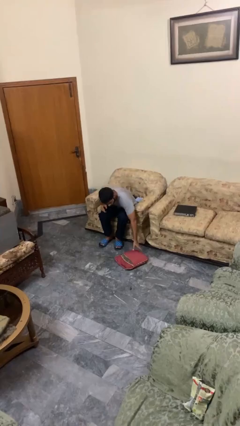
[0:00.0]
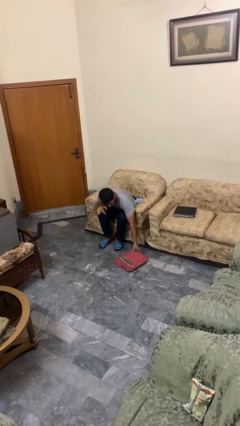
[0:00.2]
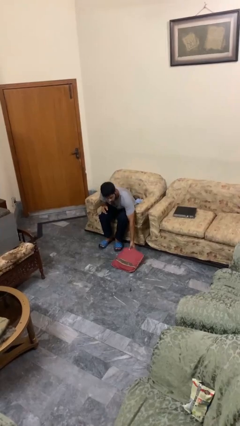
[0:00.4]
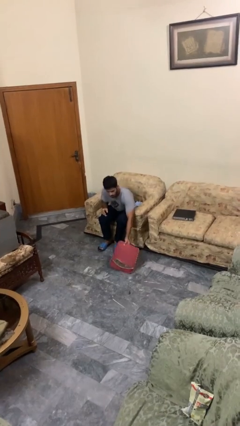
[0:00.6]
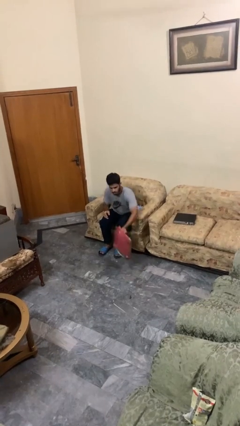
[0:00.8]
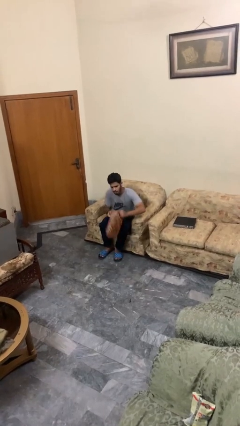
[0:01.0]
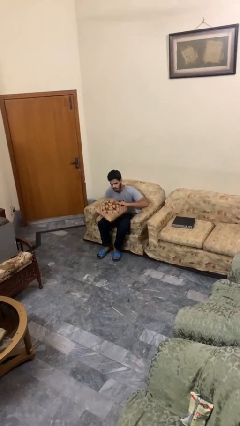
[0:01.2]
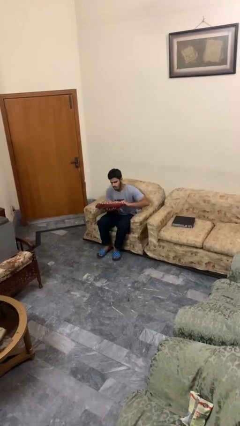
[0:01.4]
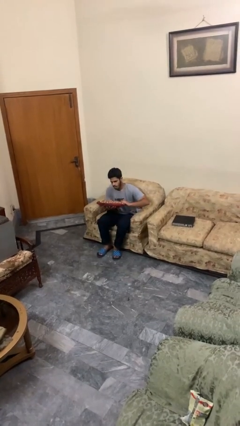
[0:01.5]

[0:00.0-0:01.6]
person picks up object from floor

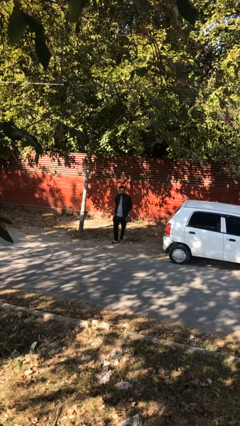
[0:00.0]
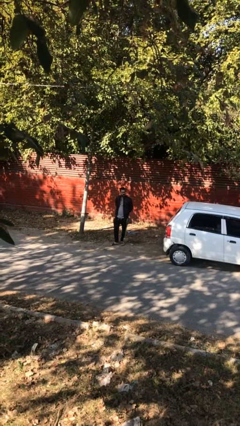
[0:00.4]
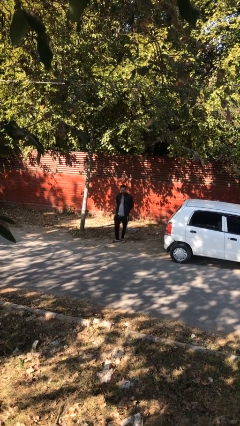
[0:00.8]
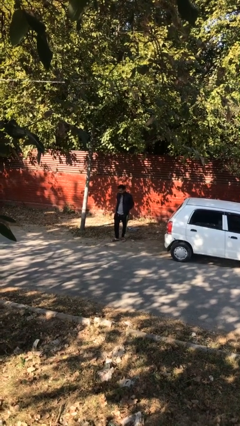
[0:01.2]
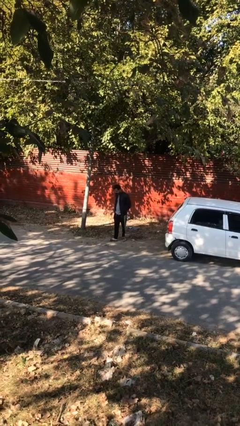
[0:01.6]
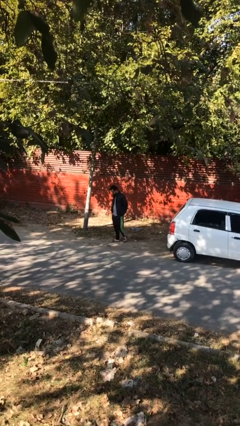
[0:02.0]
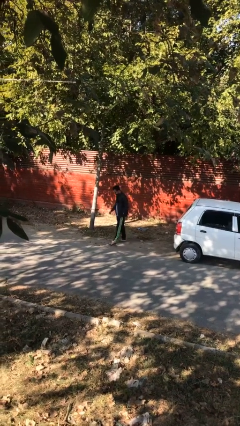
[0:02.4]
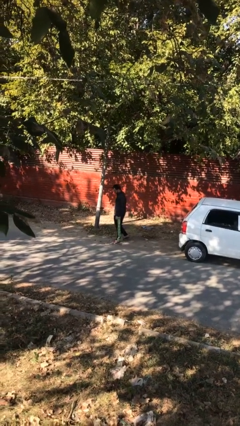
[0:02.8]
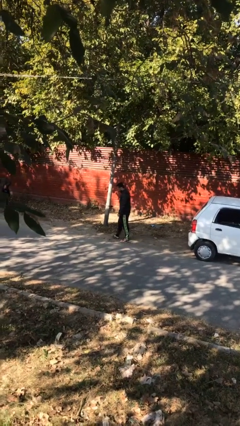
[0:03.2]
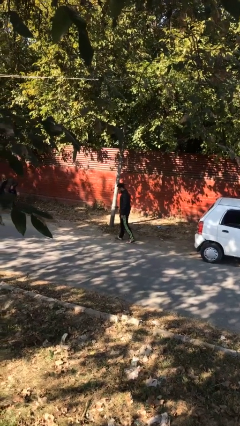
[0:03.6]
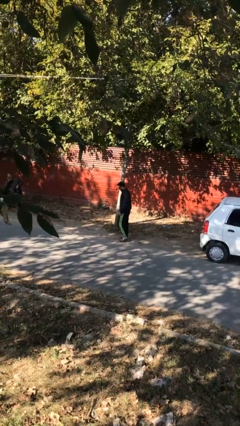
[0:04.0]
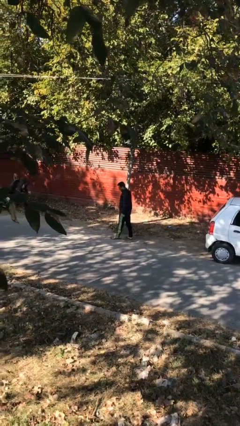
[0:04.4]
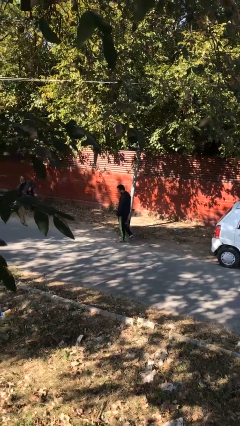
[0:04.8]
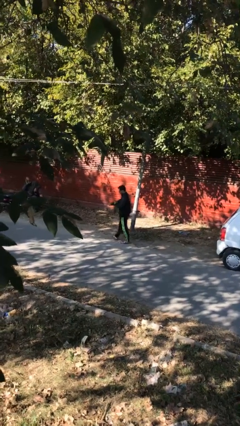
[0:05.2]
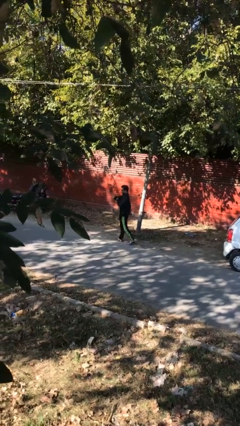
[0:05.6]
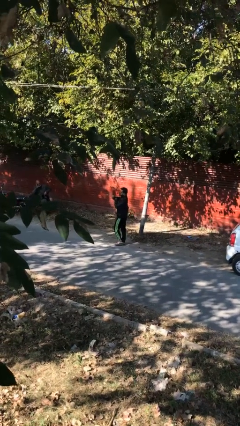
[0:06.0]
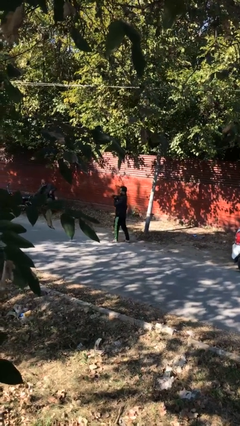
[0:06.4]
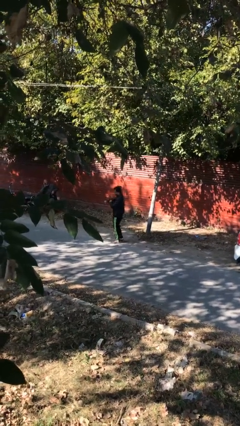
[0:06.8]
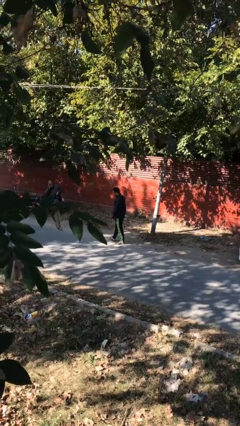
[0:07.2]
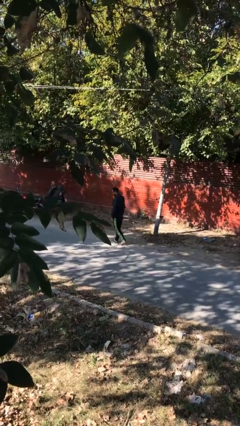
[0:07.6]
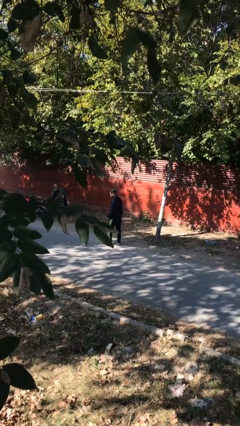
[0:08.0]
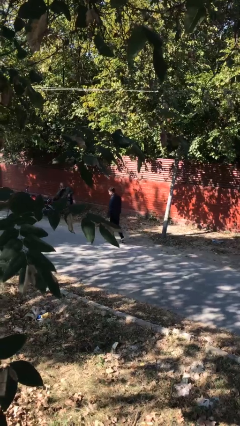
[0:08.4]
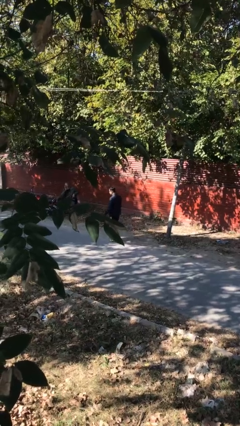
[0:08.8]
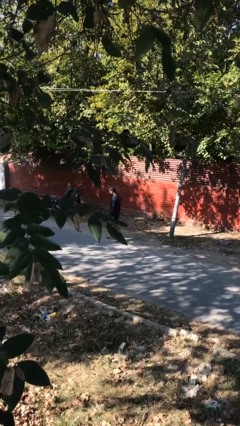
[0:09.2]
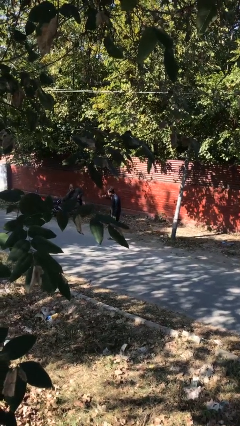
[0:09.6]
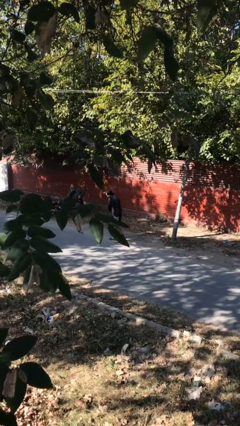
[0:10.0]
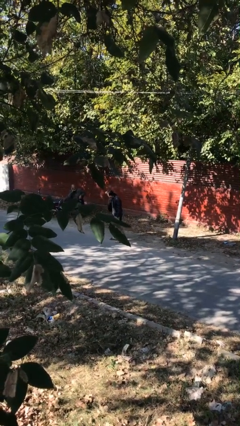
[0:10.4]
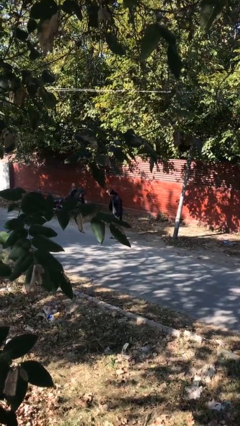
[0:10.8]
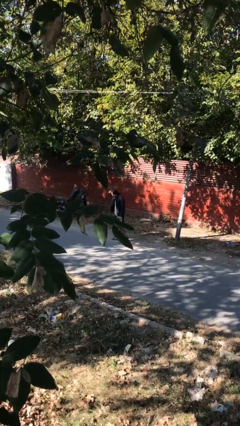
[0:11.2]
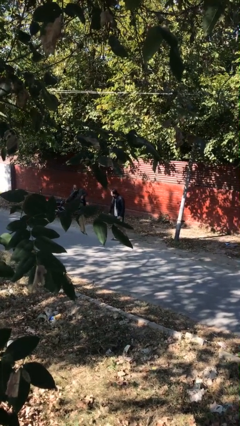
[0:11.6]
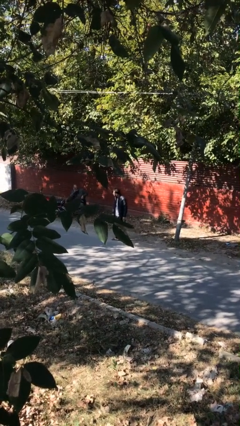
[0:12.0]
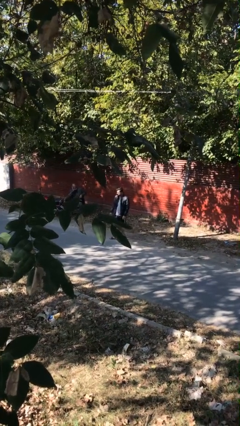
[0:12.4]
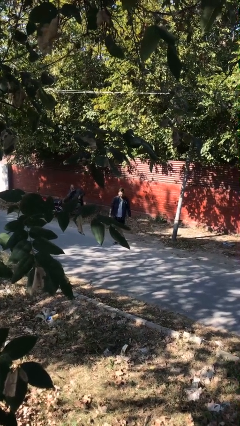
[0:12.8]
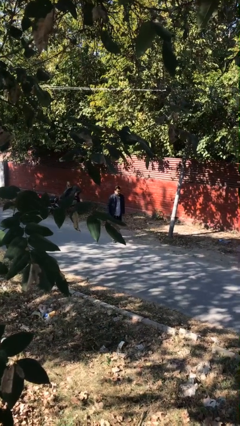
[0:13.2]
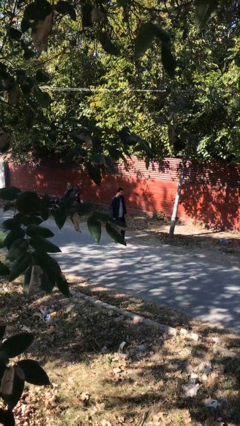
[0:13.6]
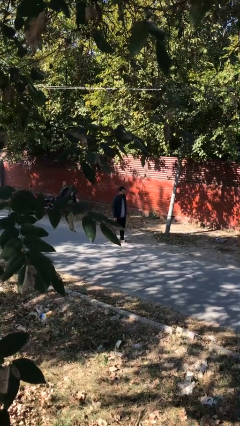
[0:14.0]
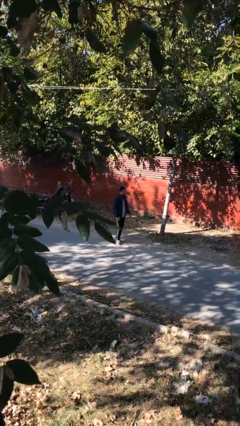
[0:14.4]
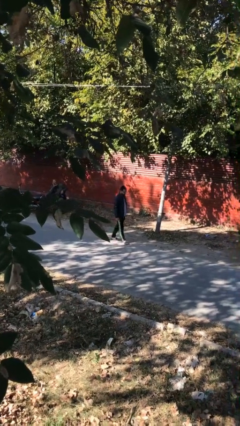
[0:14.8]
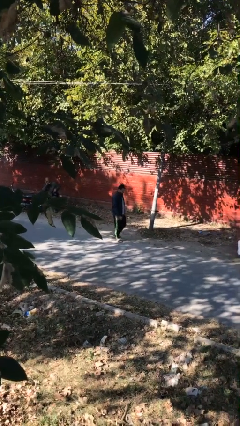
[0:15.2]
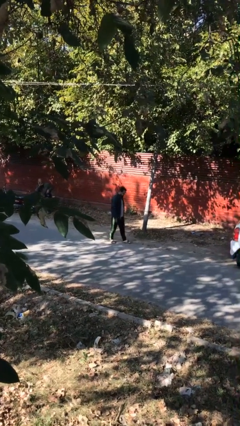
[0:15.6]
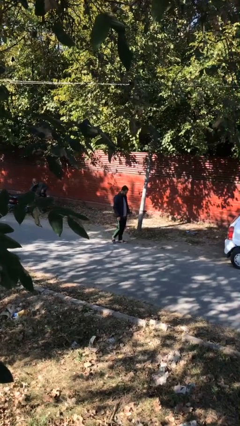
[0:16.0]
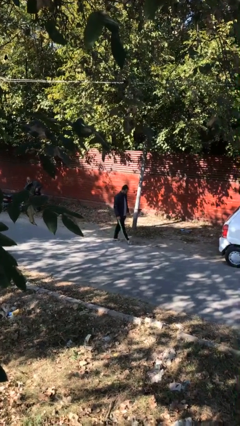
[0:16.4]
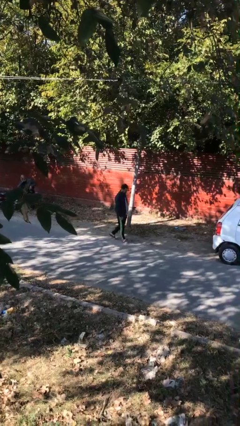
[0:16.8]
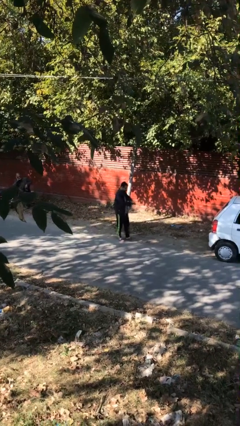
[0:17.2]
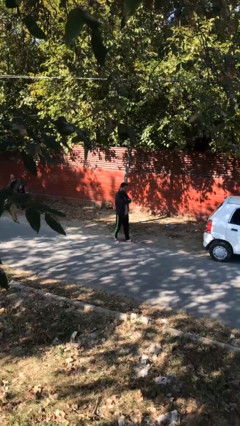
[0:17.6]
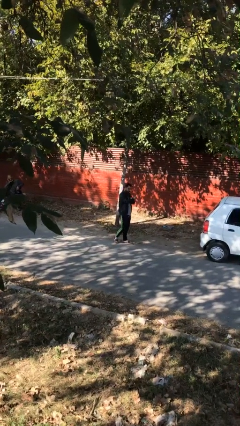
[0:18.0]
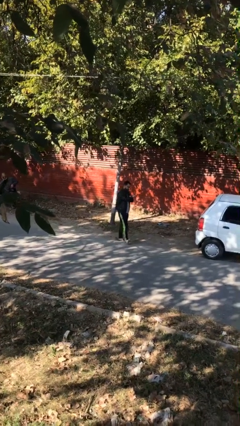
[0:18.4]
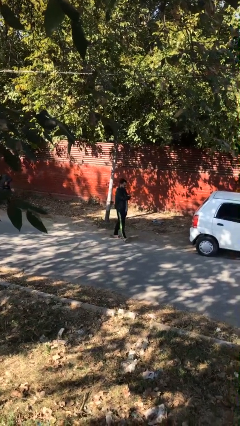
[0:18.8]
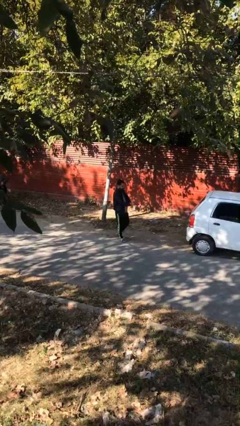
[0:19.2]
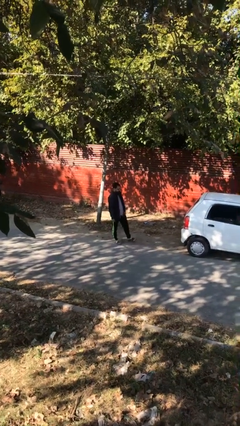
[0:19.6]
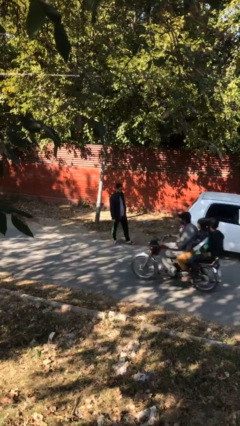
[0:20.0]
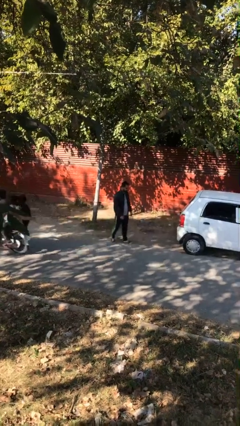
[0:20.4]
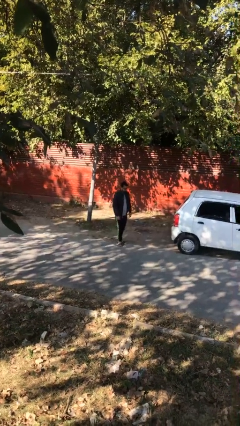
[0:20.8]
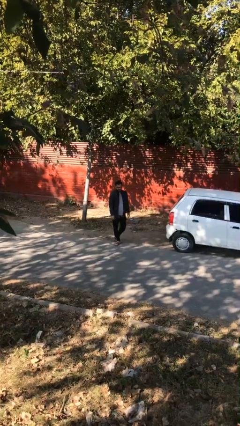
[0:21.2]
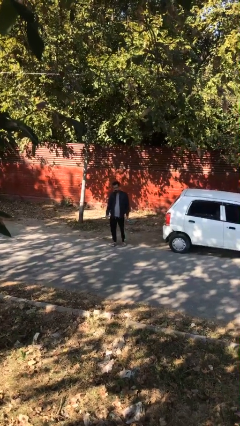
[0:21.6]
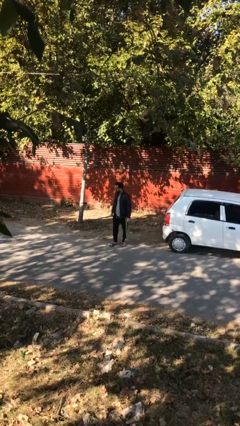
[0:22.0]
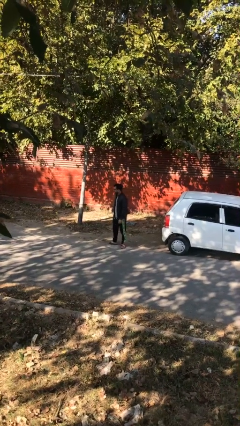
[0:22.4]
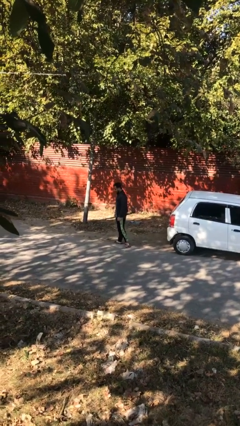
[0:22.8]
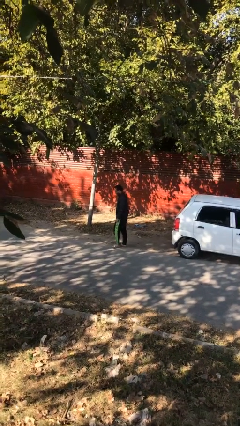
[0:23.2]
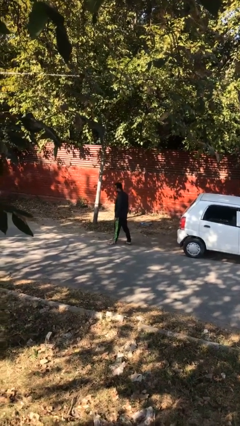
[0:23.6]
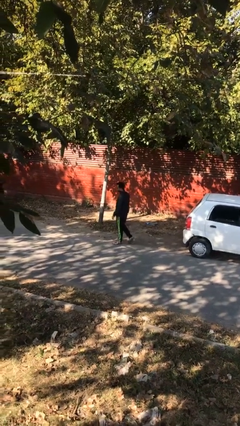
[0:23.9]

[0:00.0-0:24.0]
person walks

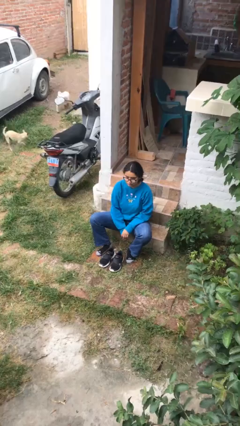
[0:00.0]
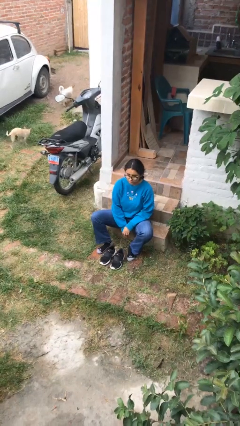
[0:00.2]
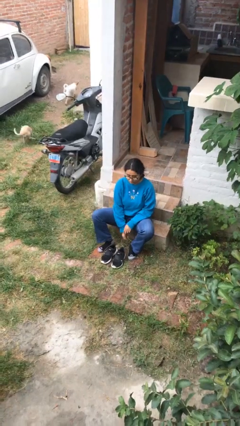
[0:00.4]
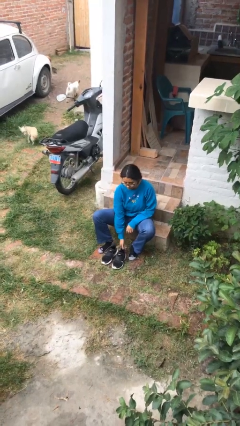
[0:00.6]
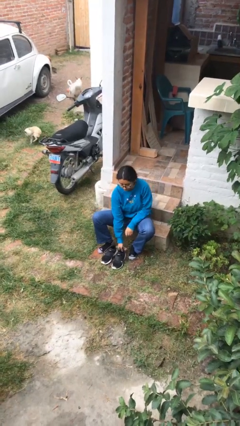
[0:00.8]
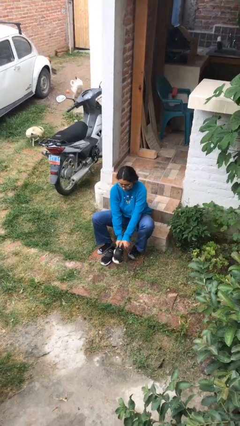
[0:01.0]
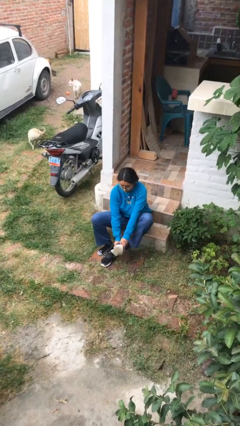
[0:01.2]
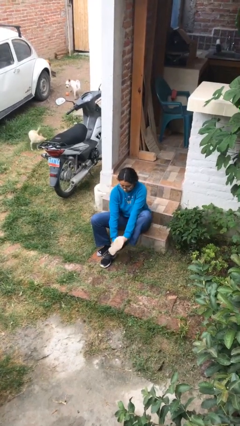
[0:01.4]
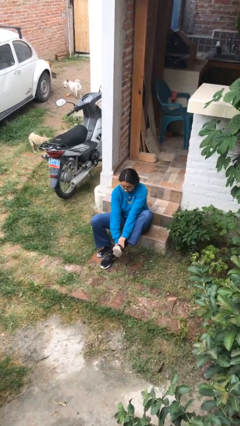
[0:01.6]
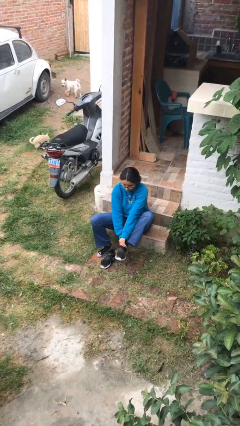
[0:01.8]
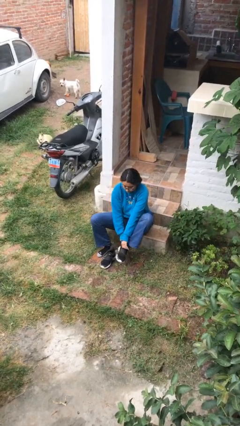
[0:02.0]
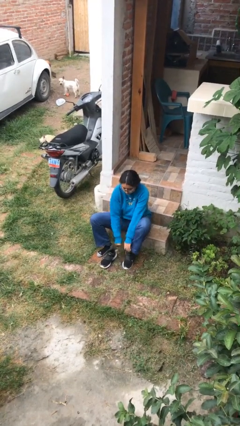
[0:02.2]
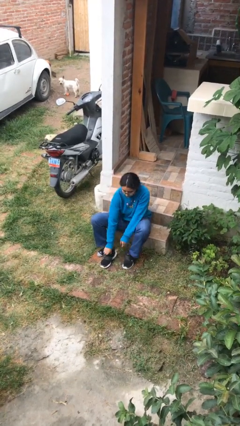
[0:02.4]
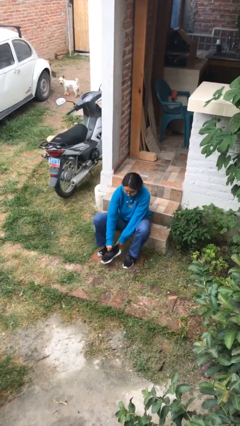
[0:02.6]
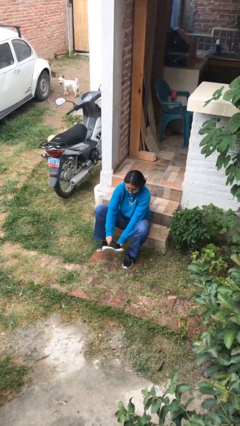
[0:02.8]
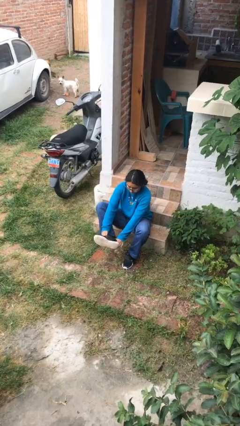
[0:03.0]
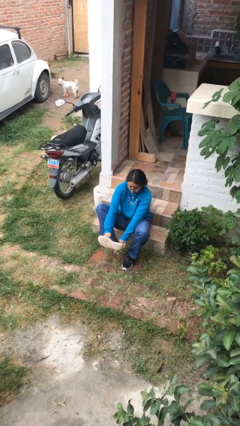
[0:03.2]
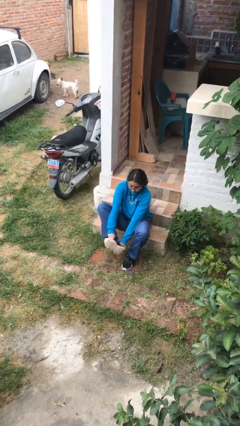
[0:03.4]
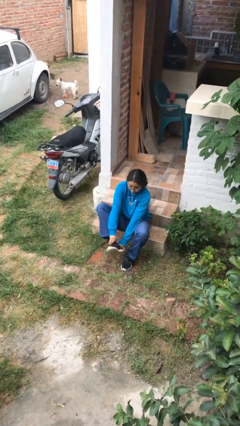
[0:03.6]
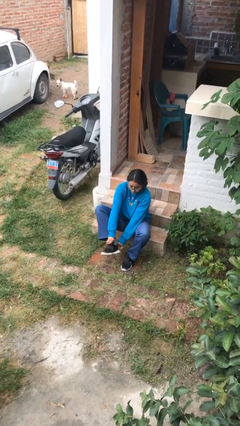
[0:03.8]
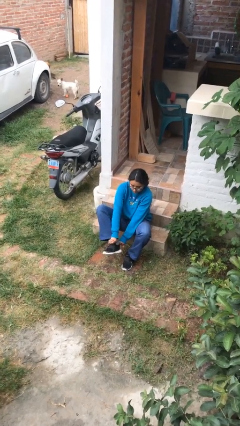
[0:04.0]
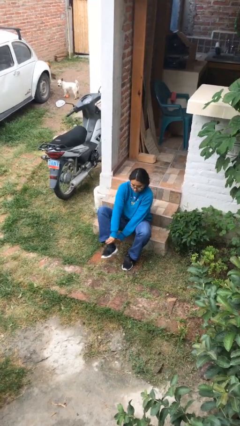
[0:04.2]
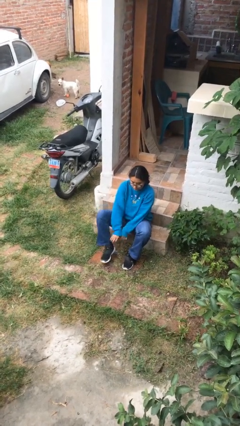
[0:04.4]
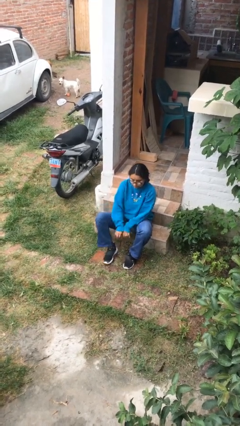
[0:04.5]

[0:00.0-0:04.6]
person puts on shoes
